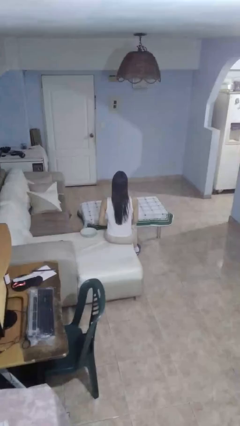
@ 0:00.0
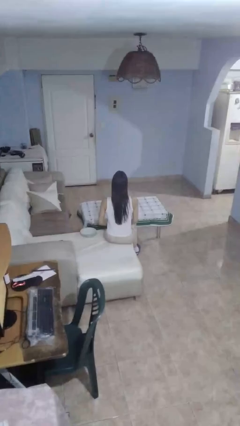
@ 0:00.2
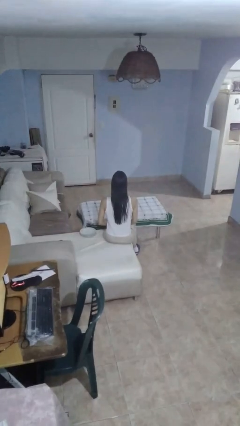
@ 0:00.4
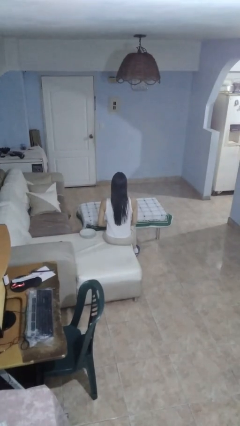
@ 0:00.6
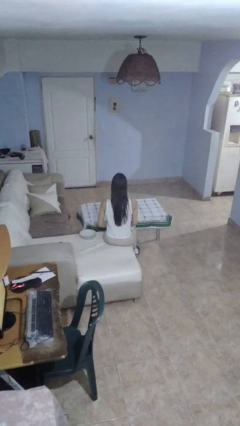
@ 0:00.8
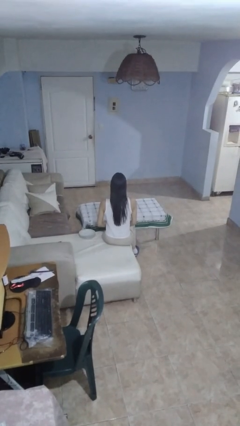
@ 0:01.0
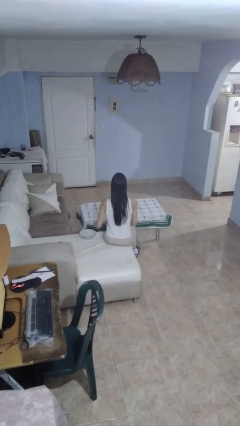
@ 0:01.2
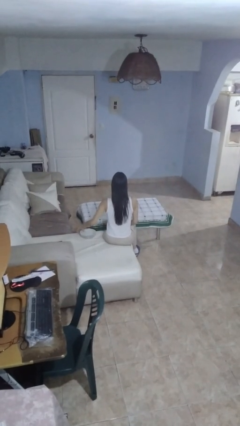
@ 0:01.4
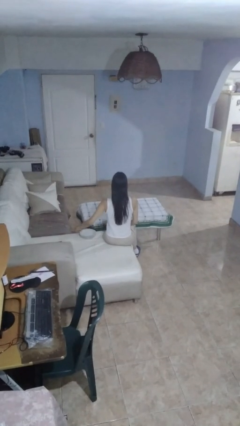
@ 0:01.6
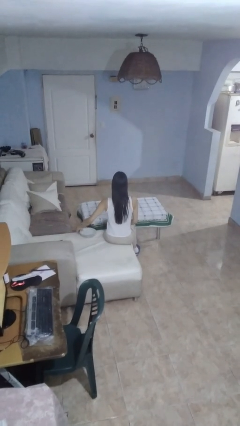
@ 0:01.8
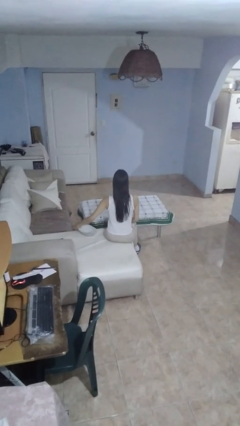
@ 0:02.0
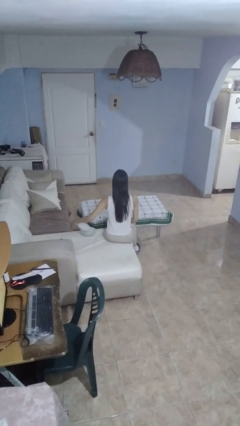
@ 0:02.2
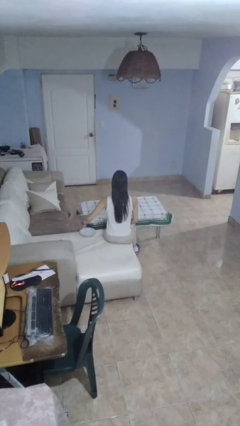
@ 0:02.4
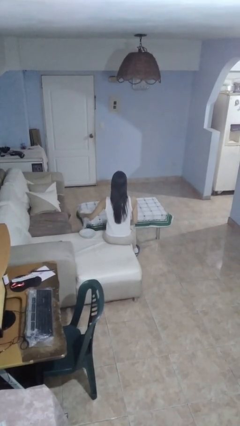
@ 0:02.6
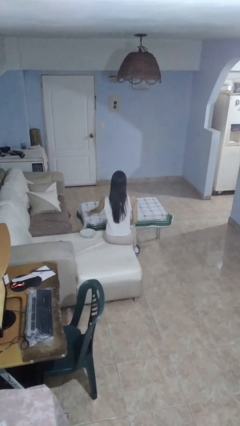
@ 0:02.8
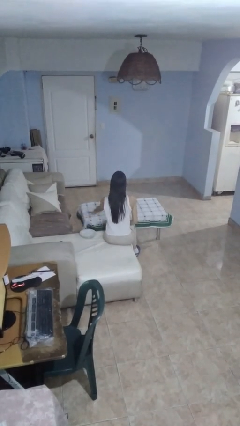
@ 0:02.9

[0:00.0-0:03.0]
person sets table

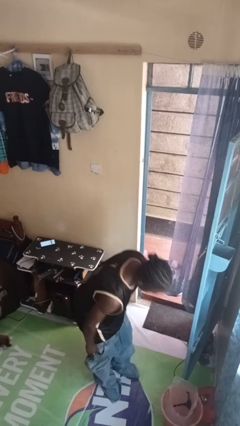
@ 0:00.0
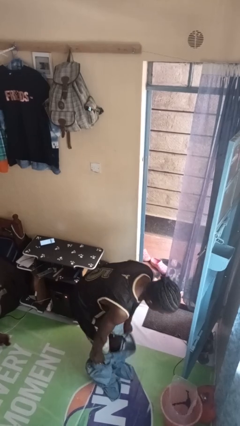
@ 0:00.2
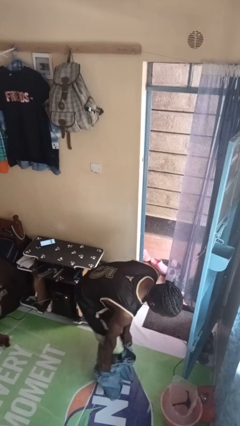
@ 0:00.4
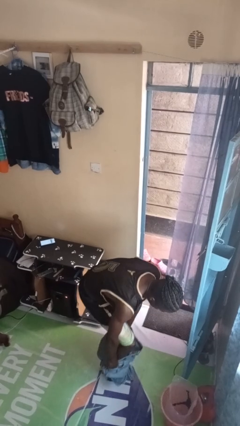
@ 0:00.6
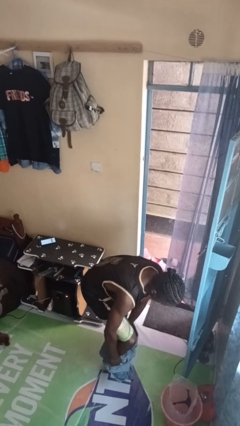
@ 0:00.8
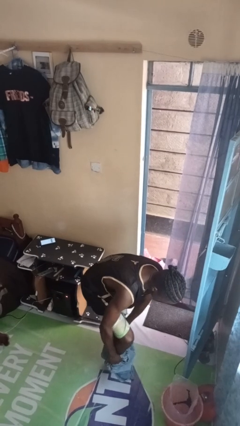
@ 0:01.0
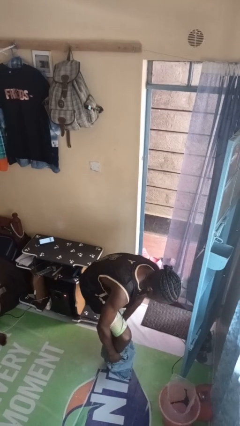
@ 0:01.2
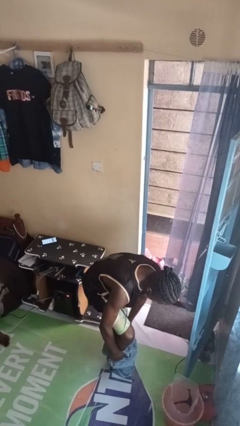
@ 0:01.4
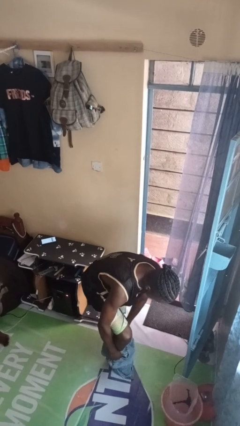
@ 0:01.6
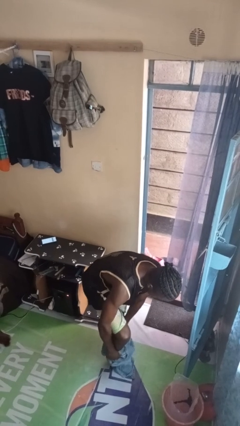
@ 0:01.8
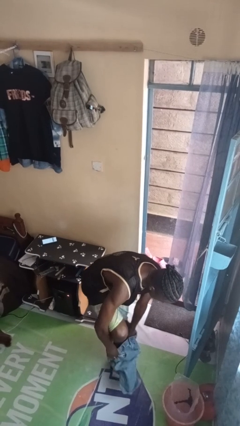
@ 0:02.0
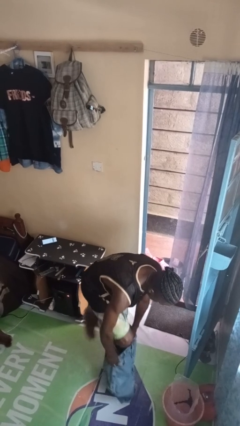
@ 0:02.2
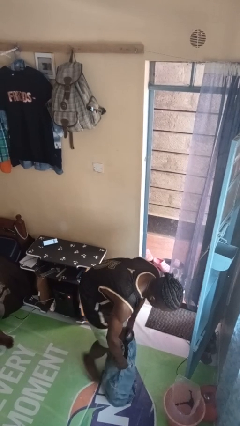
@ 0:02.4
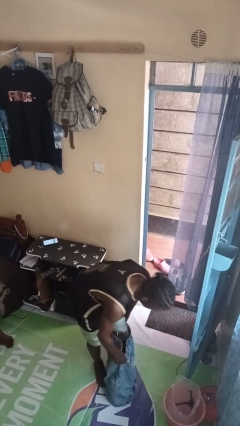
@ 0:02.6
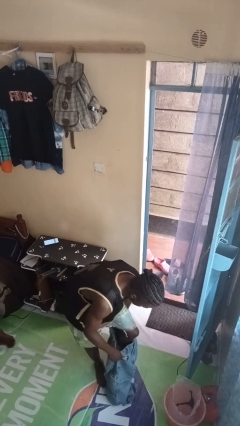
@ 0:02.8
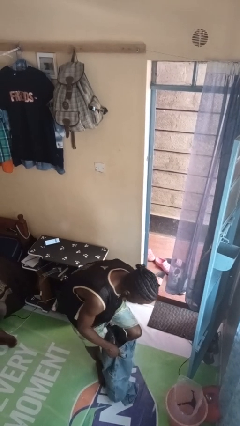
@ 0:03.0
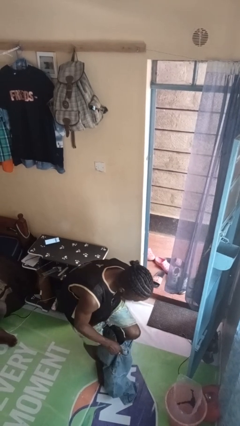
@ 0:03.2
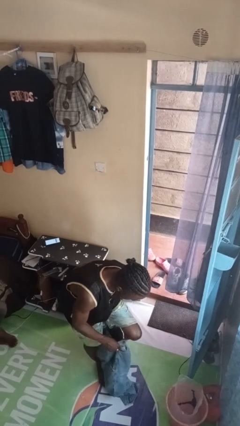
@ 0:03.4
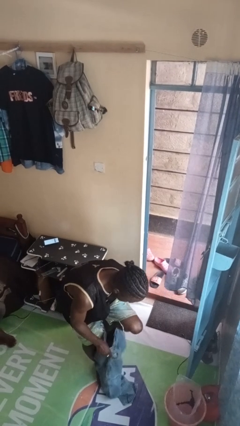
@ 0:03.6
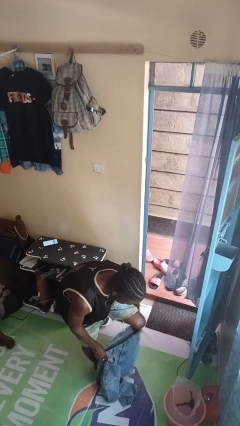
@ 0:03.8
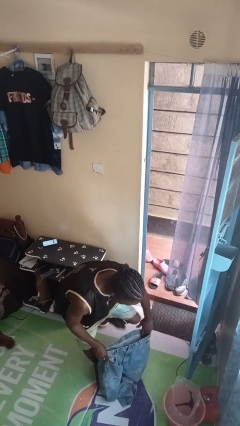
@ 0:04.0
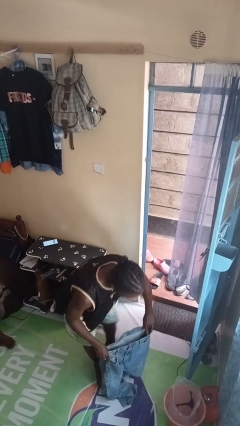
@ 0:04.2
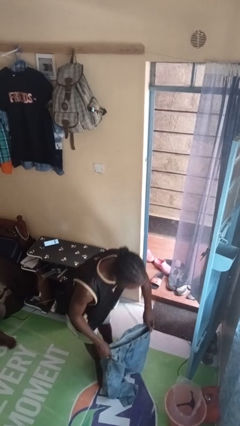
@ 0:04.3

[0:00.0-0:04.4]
person takes off pants

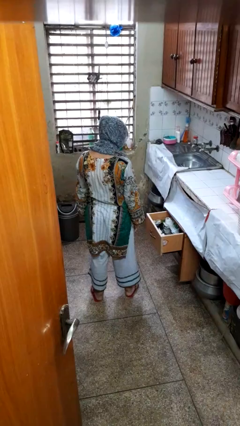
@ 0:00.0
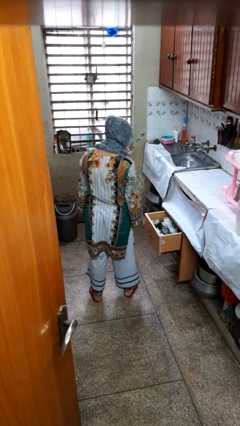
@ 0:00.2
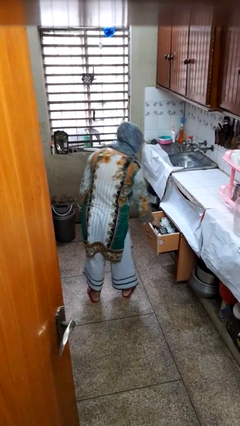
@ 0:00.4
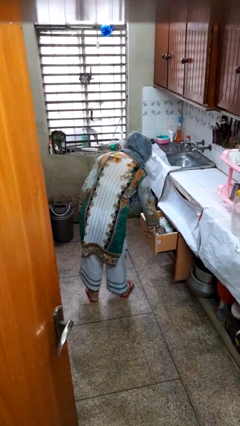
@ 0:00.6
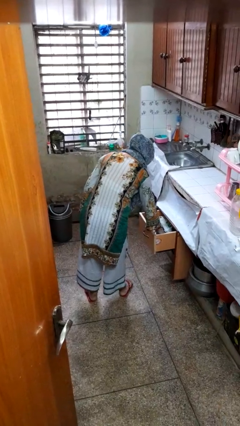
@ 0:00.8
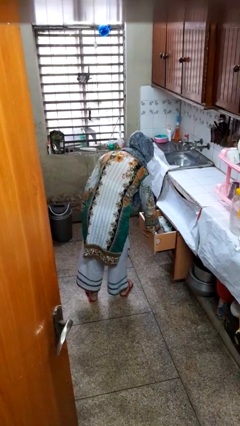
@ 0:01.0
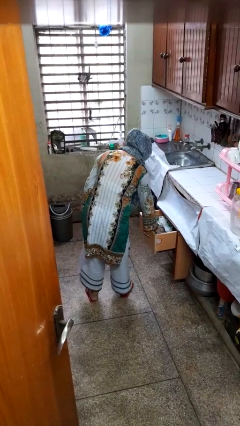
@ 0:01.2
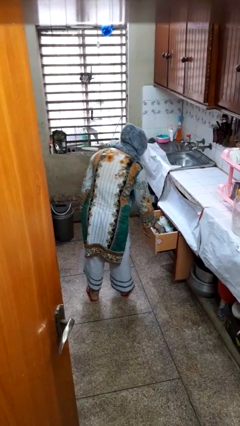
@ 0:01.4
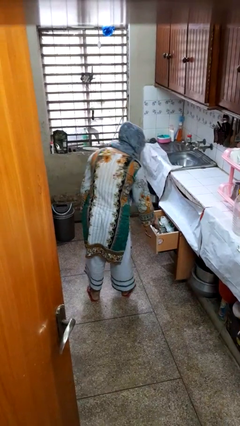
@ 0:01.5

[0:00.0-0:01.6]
person searches in kitchen drawer

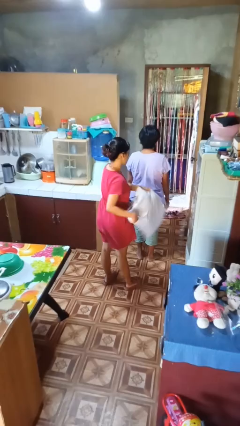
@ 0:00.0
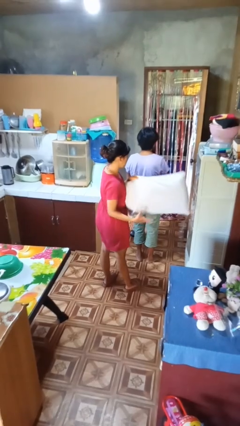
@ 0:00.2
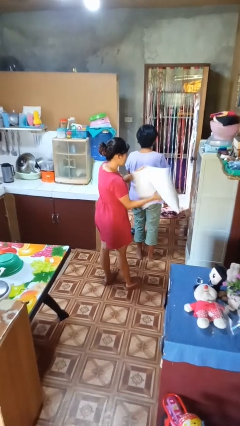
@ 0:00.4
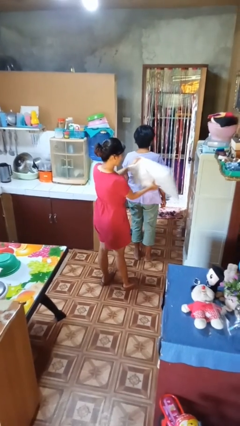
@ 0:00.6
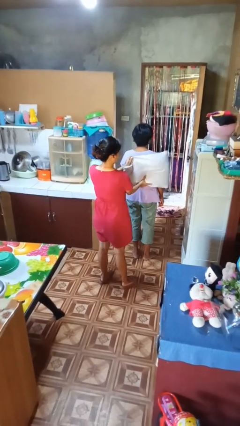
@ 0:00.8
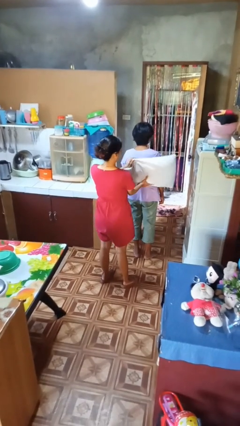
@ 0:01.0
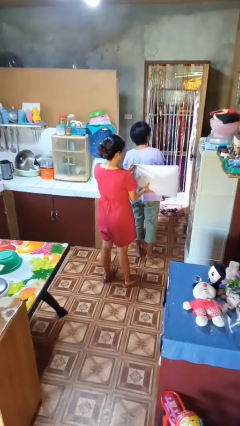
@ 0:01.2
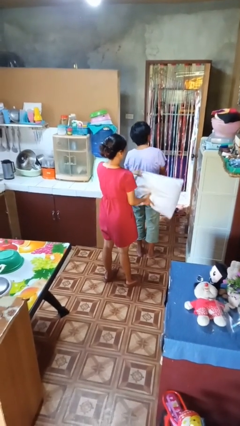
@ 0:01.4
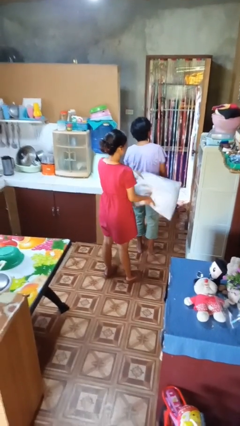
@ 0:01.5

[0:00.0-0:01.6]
person hits person with pillow

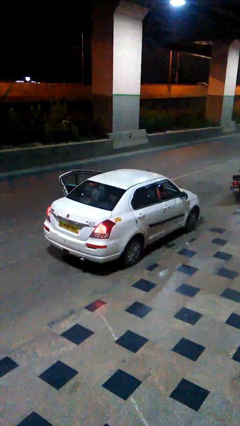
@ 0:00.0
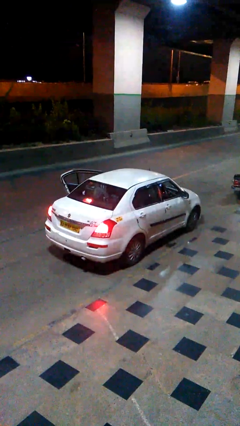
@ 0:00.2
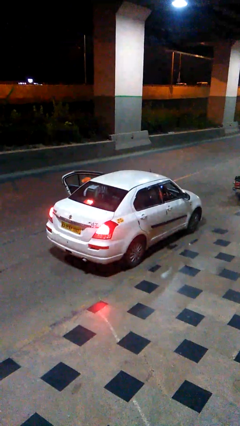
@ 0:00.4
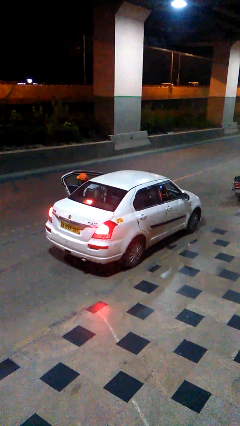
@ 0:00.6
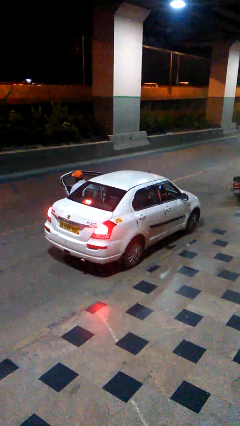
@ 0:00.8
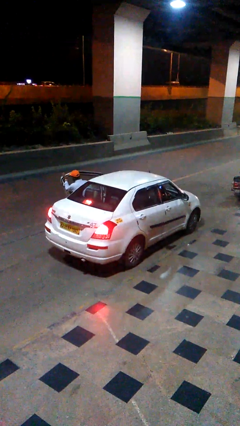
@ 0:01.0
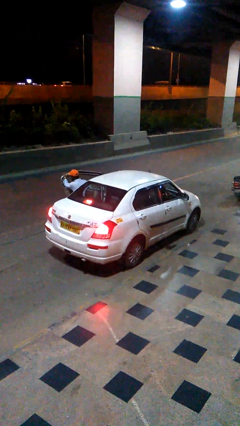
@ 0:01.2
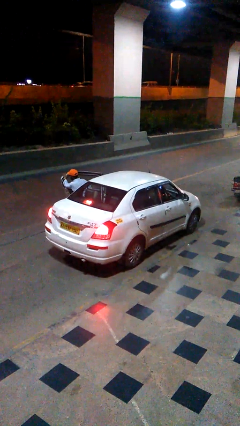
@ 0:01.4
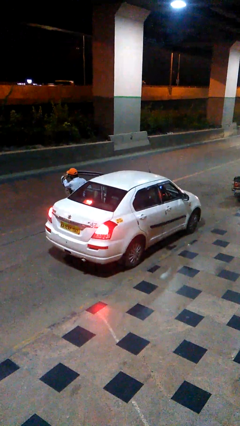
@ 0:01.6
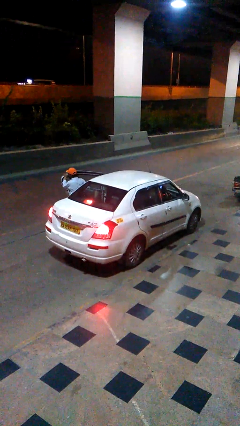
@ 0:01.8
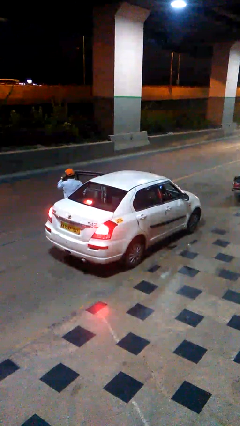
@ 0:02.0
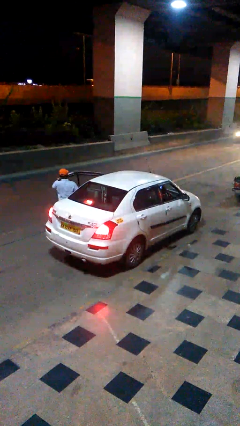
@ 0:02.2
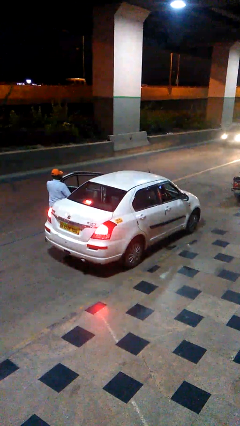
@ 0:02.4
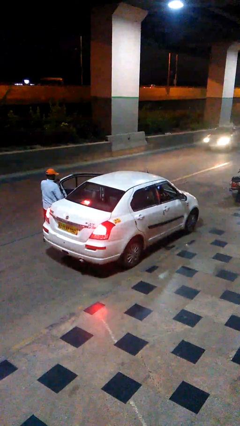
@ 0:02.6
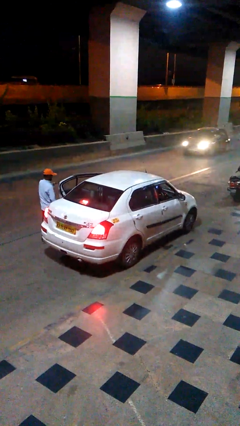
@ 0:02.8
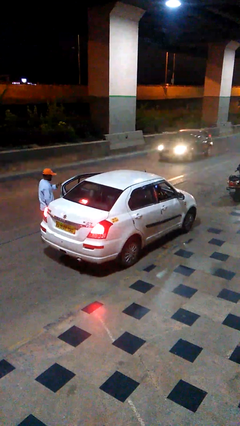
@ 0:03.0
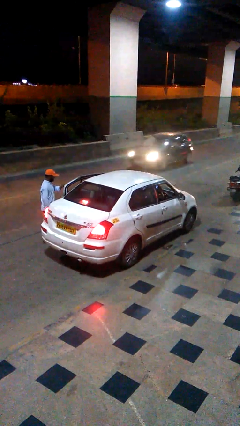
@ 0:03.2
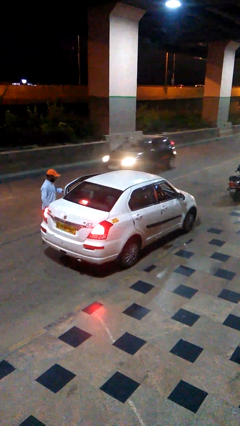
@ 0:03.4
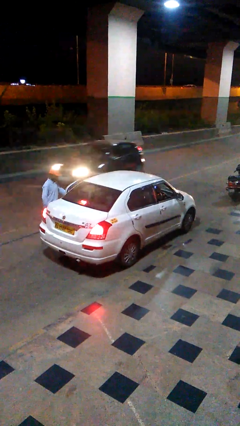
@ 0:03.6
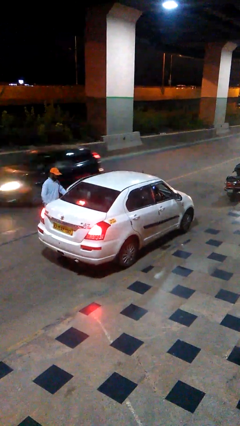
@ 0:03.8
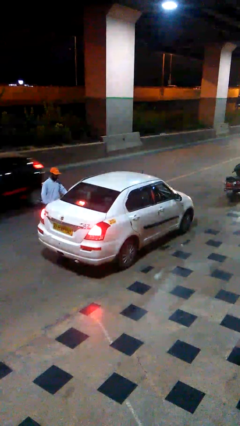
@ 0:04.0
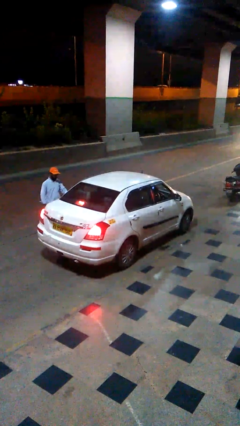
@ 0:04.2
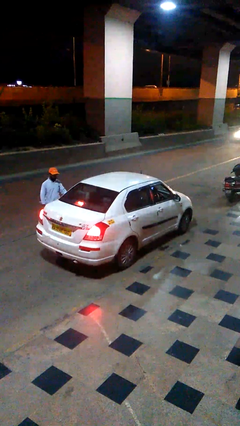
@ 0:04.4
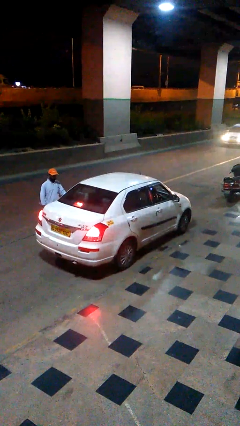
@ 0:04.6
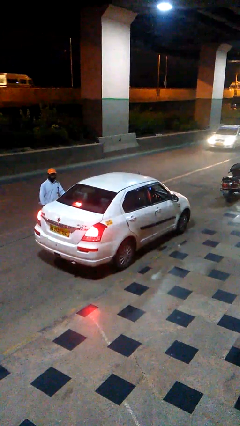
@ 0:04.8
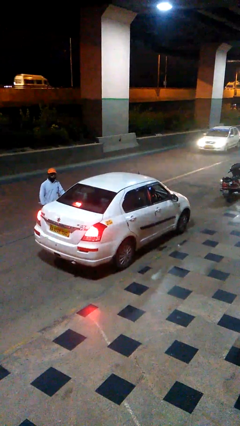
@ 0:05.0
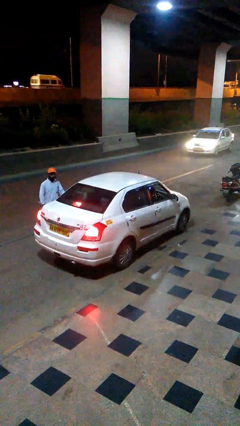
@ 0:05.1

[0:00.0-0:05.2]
car drops off person

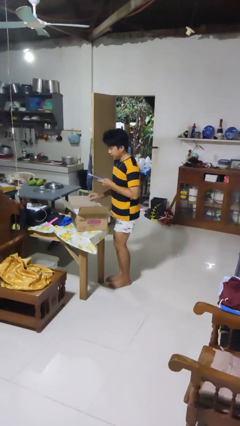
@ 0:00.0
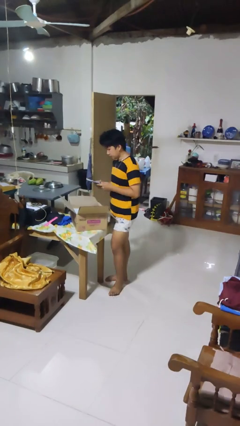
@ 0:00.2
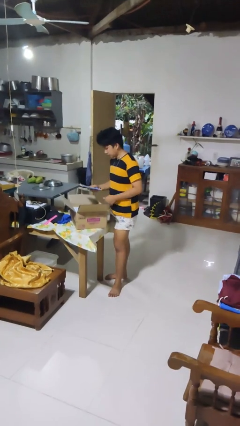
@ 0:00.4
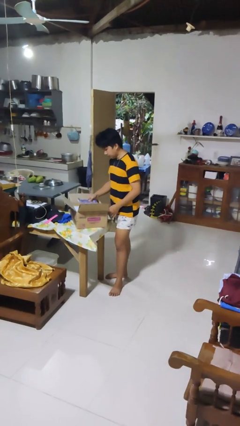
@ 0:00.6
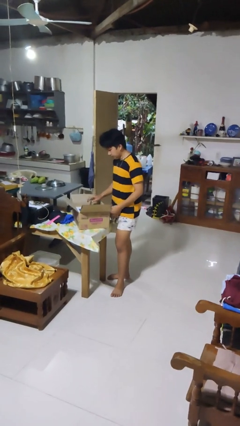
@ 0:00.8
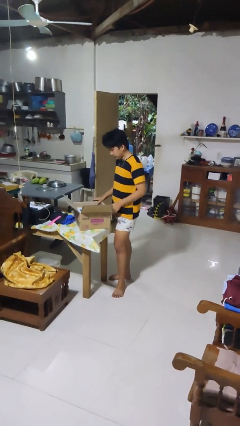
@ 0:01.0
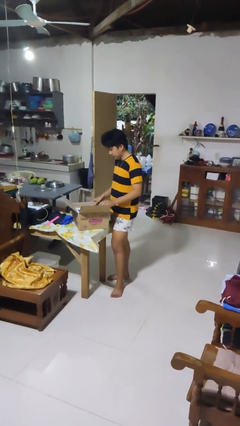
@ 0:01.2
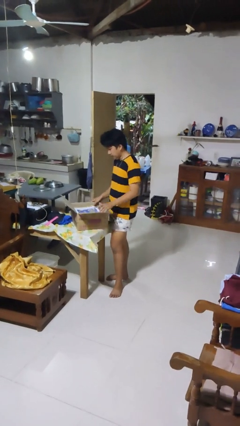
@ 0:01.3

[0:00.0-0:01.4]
person puts object into box
